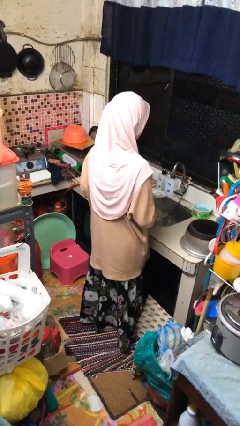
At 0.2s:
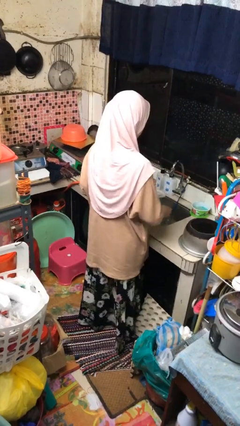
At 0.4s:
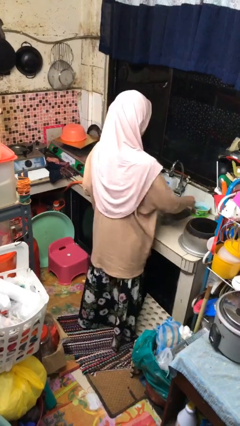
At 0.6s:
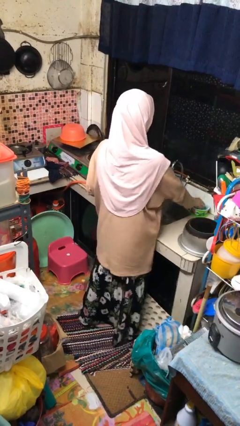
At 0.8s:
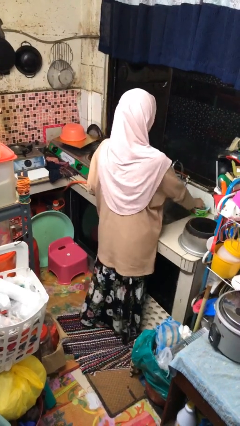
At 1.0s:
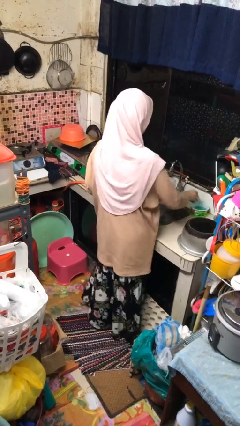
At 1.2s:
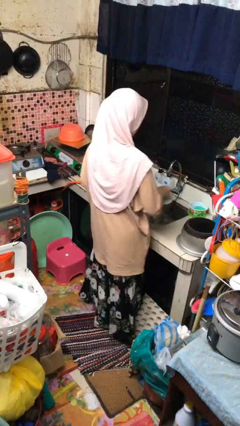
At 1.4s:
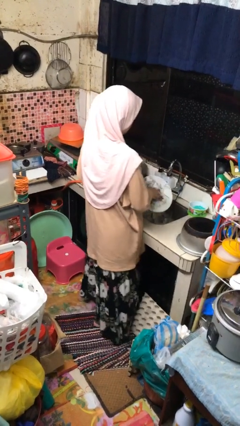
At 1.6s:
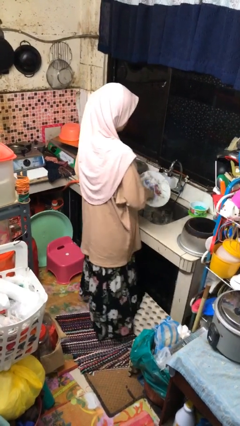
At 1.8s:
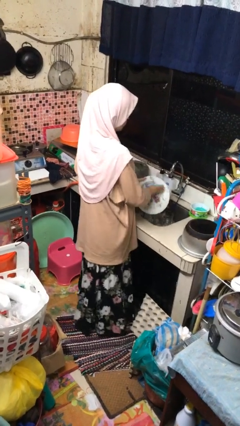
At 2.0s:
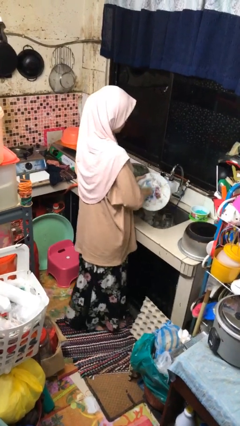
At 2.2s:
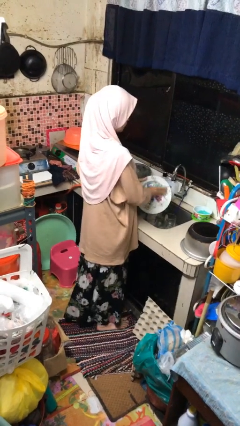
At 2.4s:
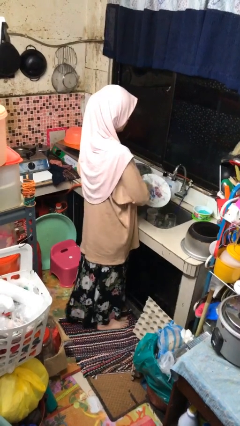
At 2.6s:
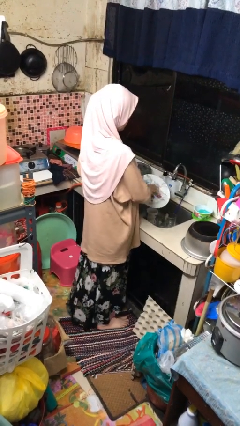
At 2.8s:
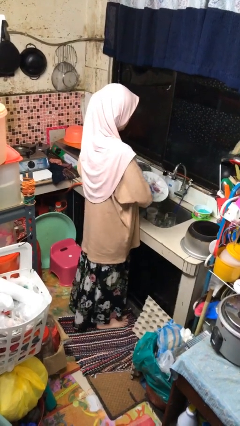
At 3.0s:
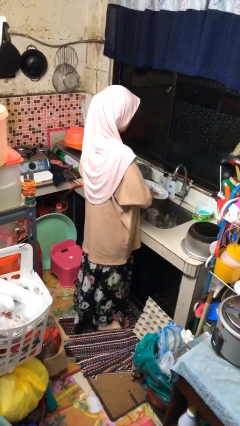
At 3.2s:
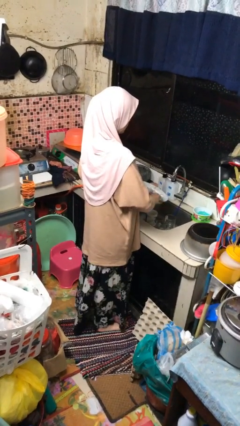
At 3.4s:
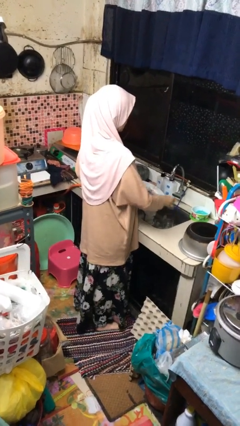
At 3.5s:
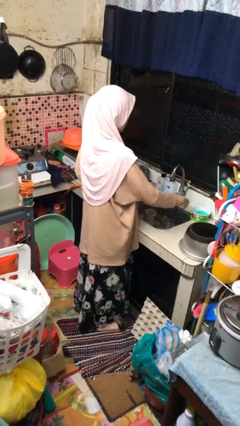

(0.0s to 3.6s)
person washes dish

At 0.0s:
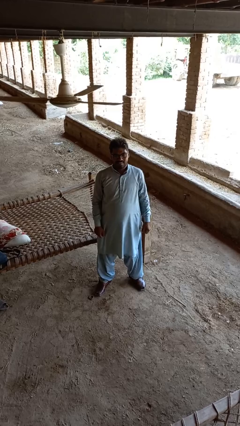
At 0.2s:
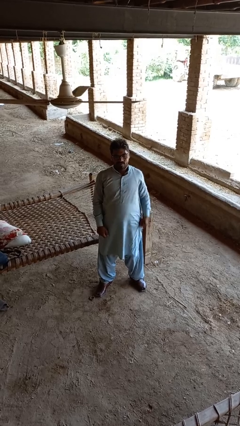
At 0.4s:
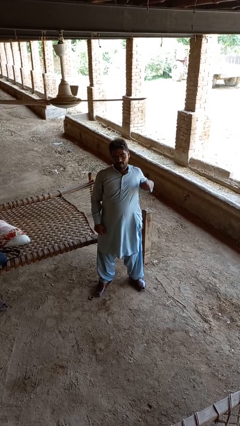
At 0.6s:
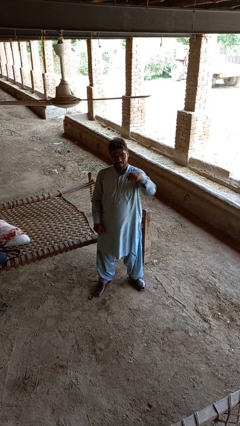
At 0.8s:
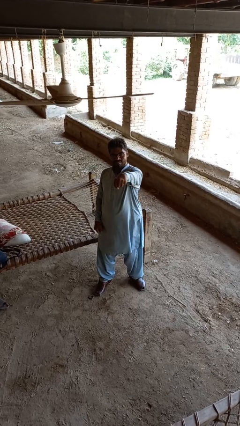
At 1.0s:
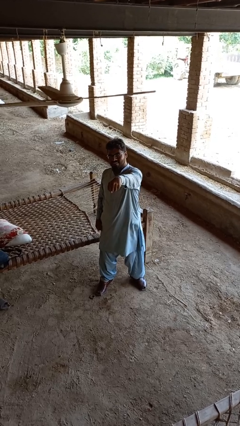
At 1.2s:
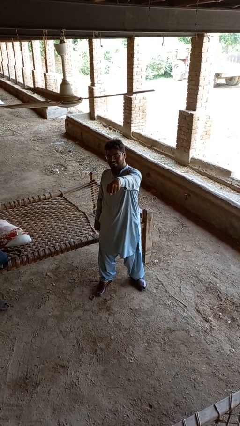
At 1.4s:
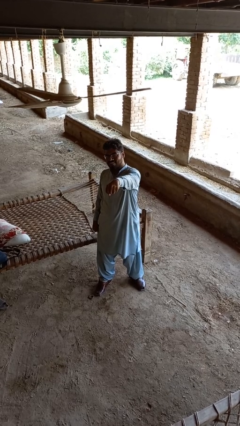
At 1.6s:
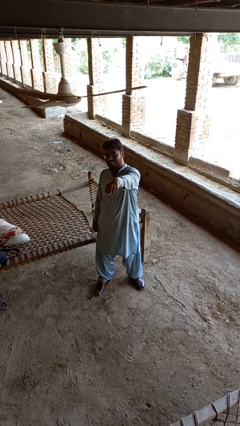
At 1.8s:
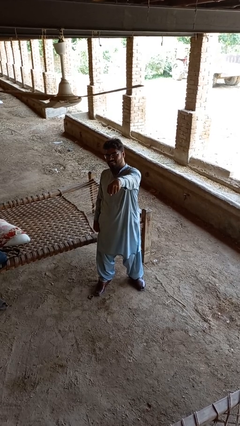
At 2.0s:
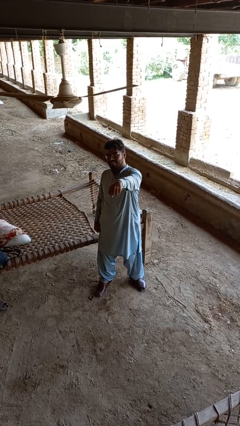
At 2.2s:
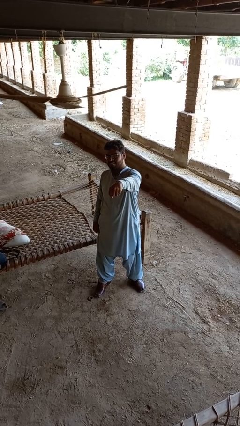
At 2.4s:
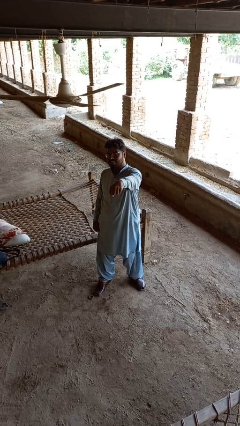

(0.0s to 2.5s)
person punches

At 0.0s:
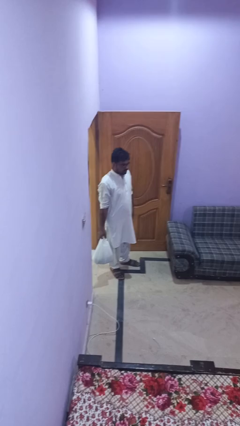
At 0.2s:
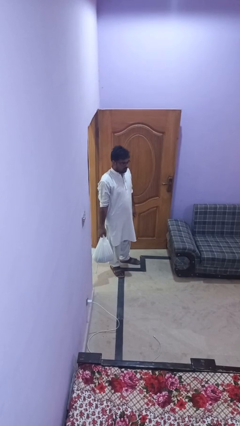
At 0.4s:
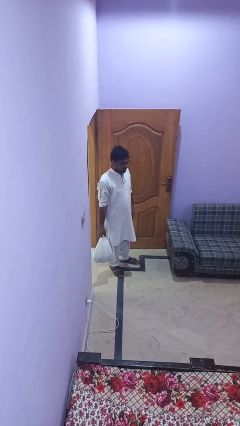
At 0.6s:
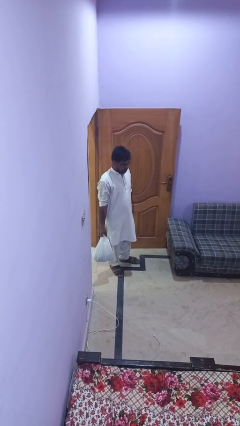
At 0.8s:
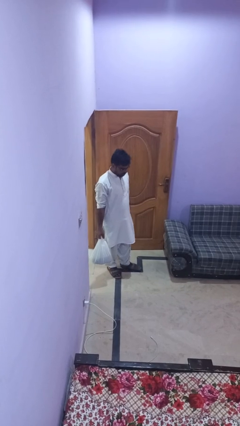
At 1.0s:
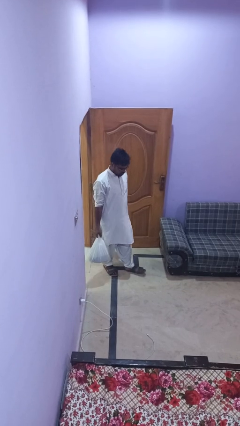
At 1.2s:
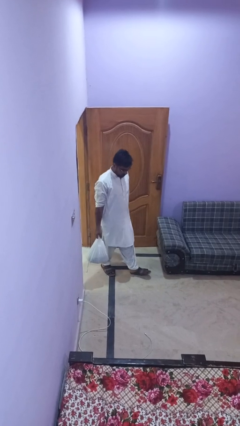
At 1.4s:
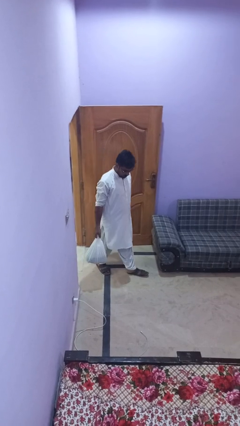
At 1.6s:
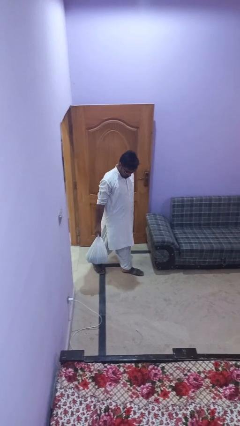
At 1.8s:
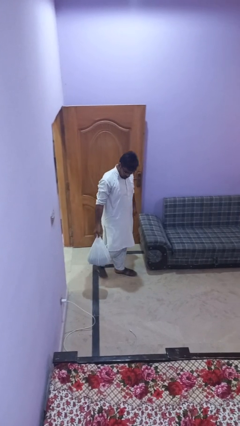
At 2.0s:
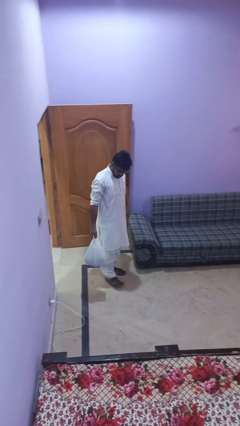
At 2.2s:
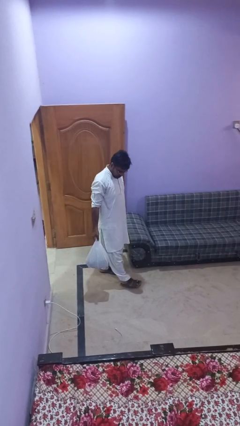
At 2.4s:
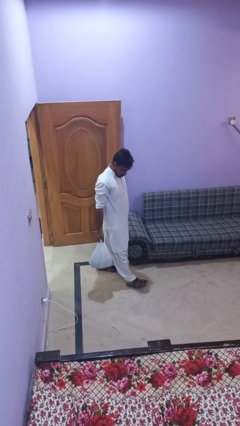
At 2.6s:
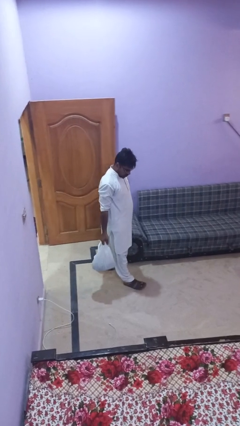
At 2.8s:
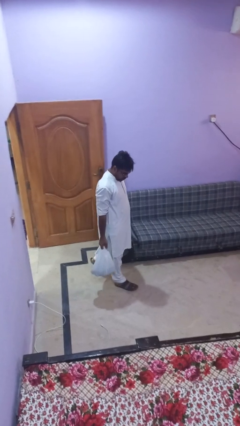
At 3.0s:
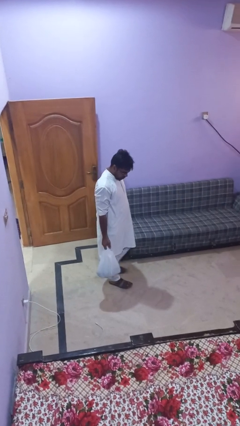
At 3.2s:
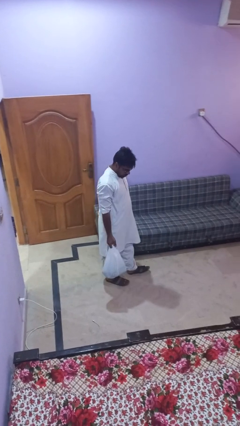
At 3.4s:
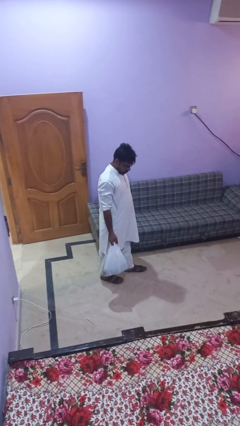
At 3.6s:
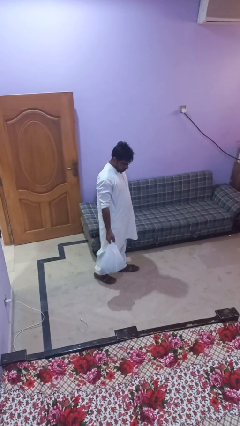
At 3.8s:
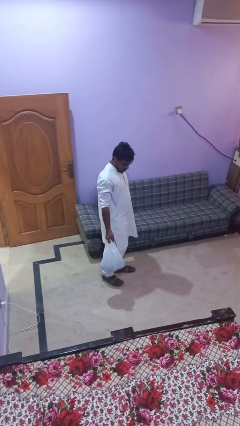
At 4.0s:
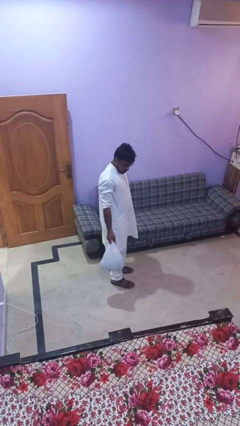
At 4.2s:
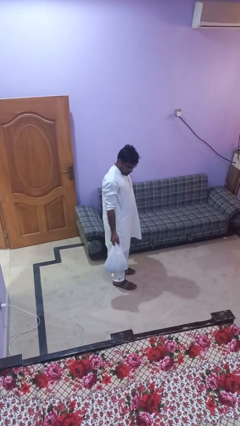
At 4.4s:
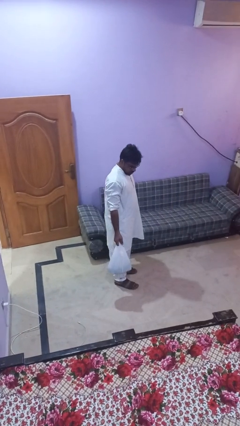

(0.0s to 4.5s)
person carries groceries

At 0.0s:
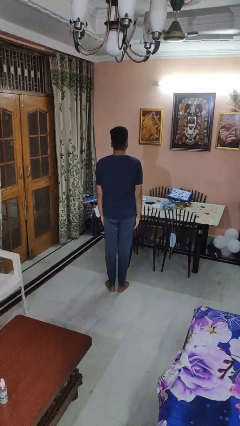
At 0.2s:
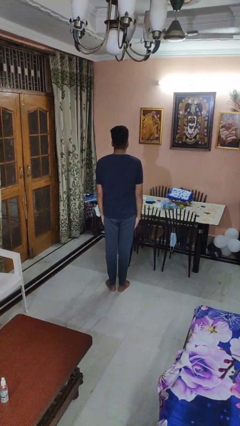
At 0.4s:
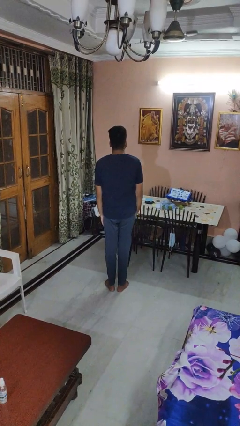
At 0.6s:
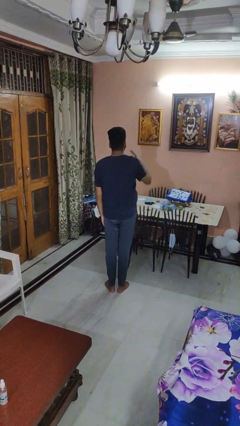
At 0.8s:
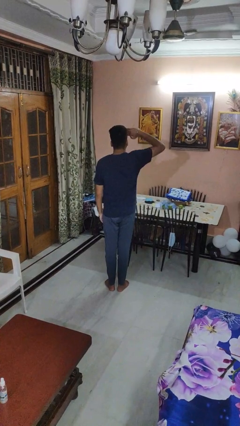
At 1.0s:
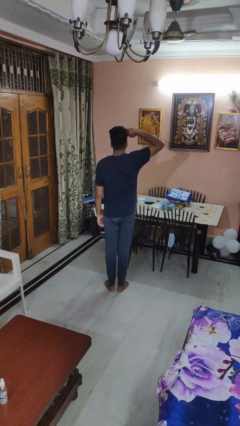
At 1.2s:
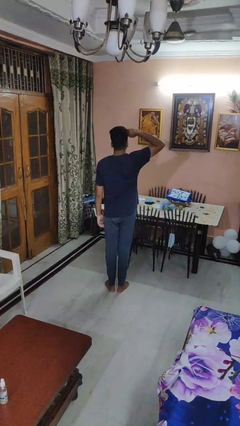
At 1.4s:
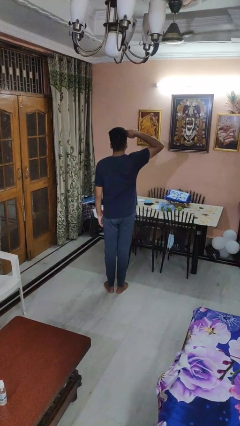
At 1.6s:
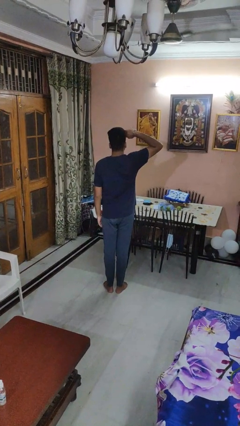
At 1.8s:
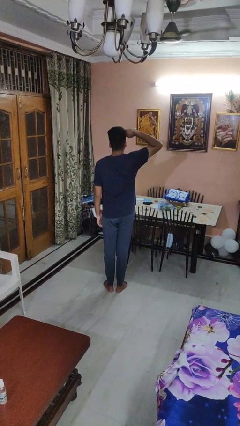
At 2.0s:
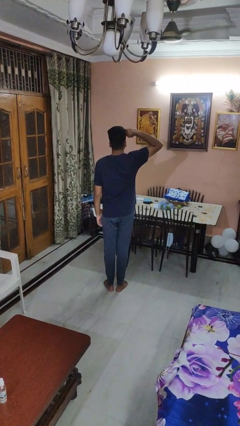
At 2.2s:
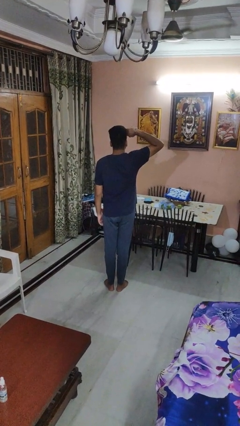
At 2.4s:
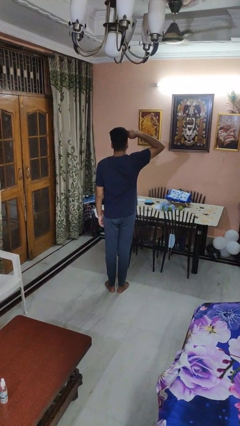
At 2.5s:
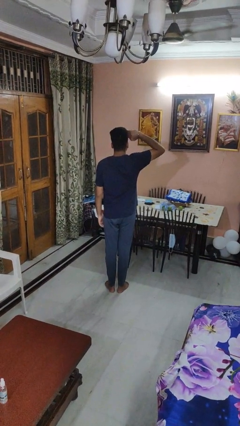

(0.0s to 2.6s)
person salutes

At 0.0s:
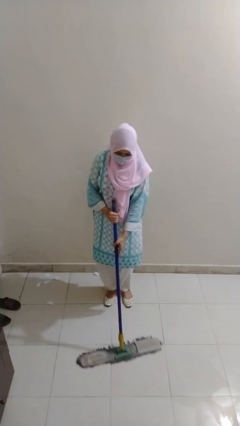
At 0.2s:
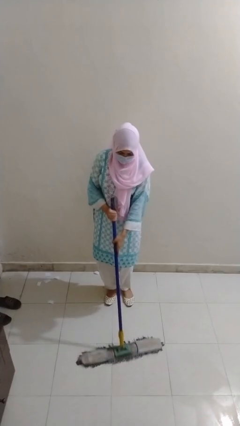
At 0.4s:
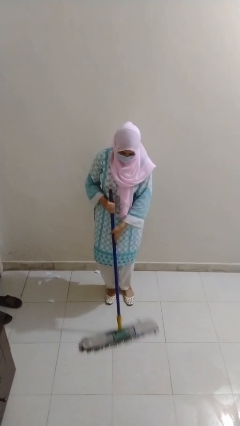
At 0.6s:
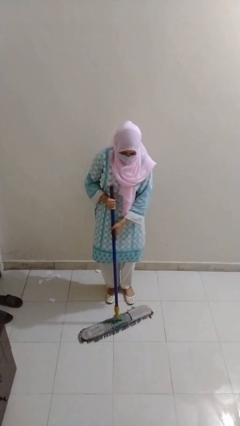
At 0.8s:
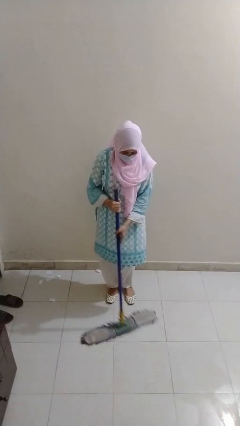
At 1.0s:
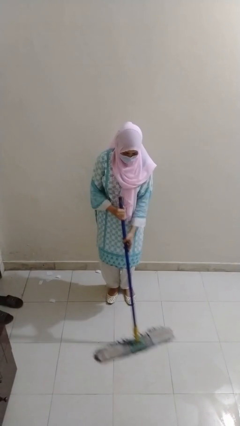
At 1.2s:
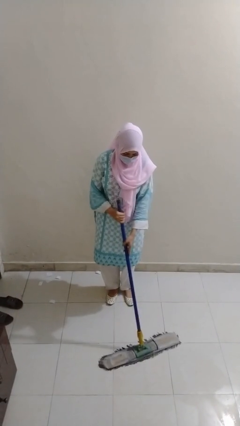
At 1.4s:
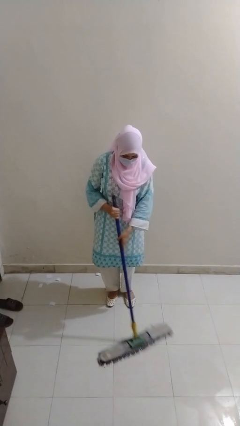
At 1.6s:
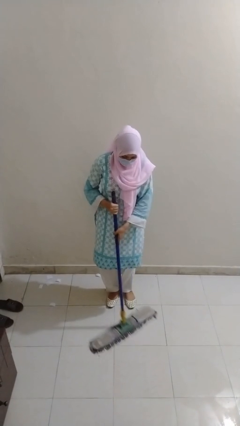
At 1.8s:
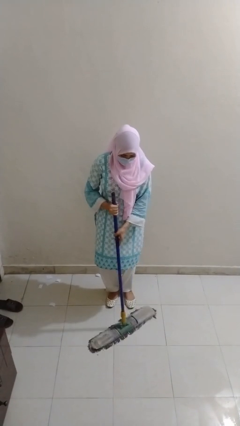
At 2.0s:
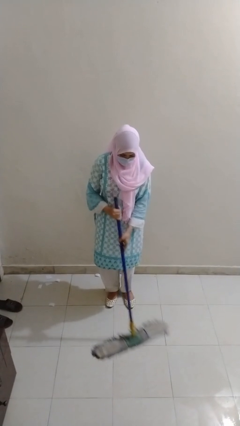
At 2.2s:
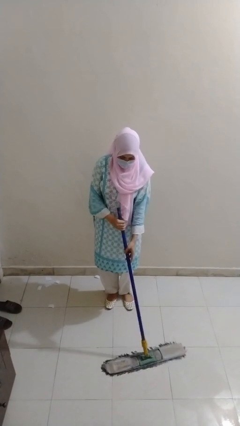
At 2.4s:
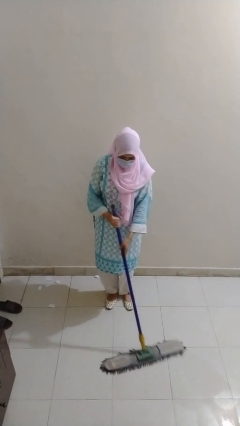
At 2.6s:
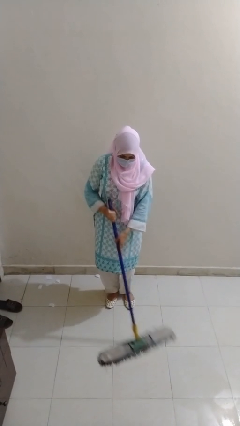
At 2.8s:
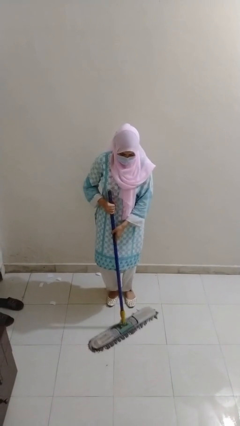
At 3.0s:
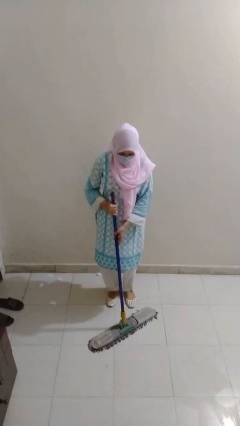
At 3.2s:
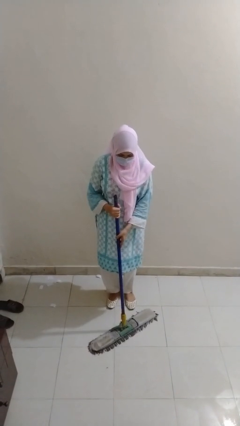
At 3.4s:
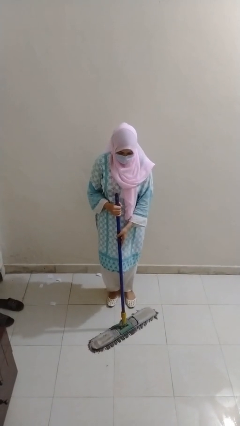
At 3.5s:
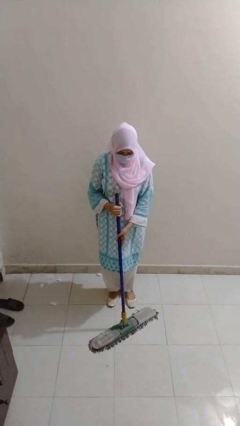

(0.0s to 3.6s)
person mops

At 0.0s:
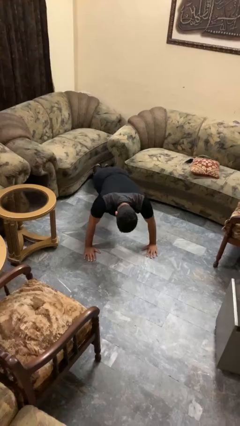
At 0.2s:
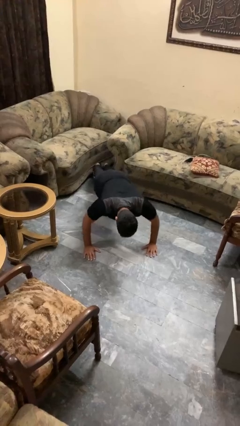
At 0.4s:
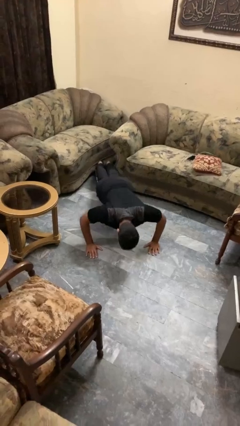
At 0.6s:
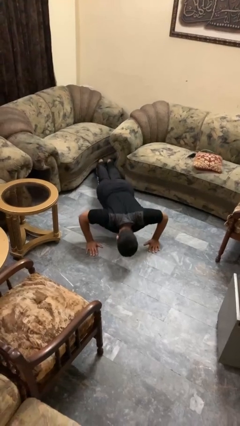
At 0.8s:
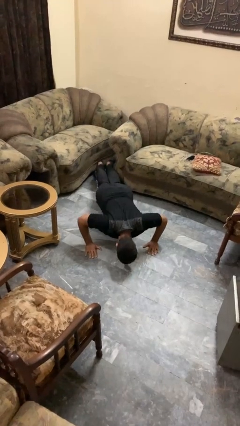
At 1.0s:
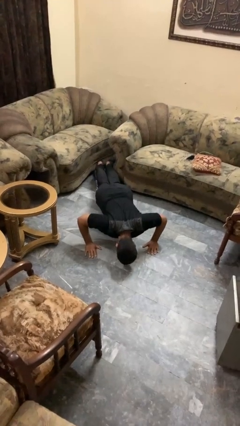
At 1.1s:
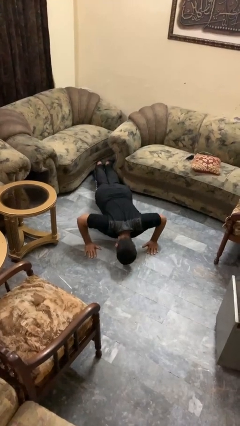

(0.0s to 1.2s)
person exercises with pushup
